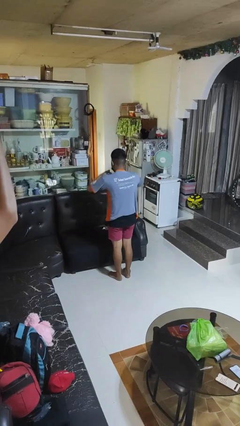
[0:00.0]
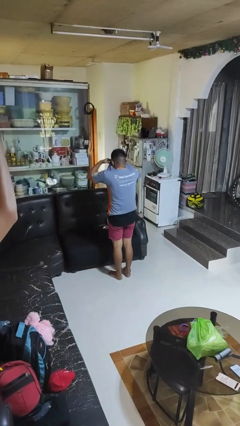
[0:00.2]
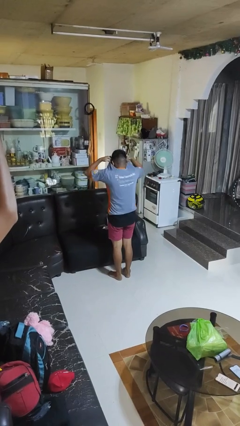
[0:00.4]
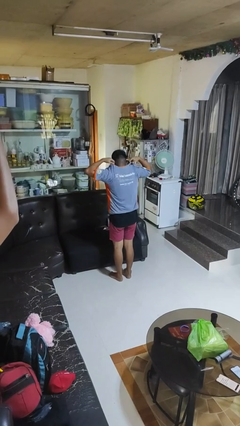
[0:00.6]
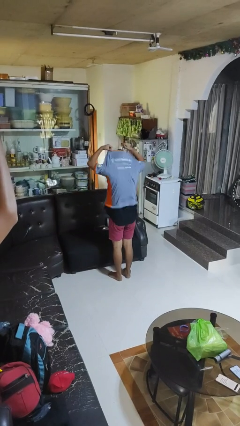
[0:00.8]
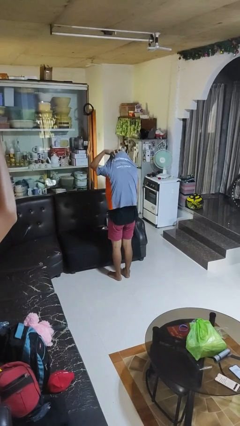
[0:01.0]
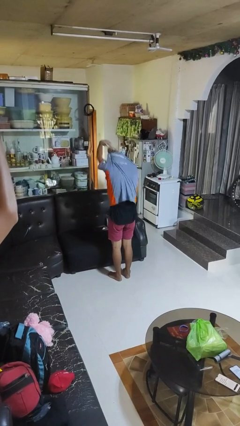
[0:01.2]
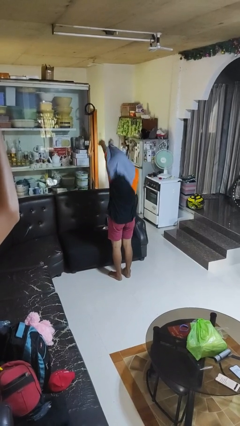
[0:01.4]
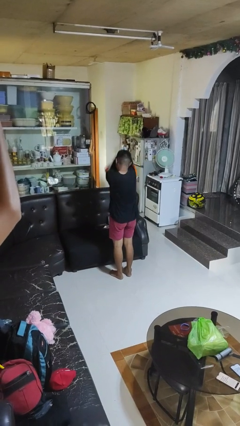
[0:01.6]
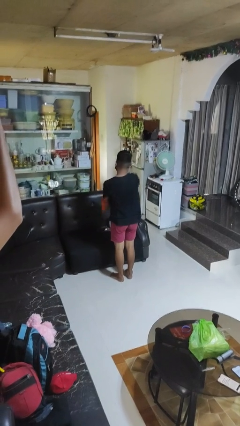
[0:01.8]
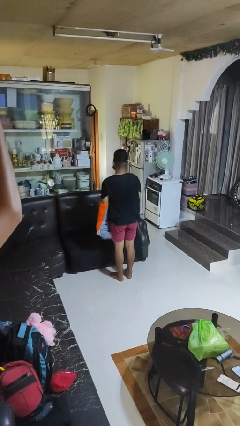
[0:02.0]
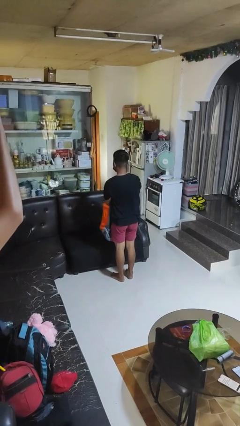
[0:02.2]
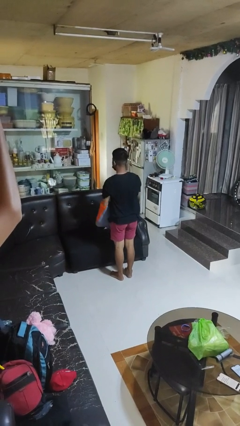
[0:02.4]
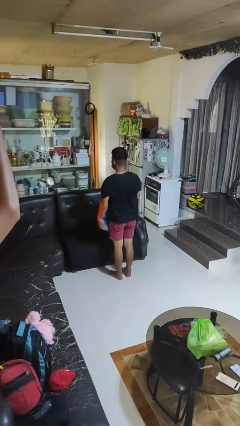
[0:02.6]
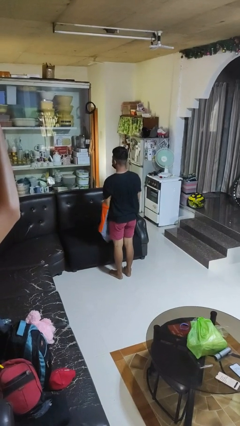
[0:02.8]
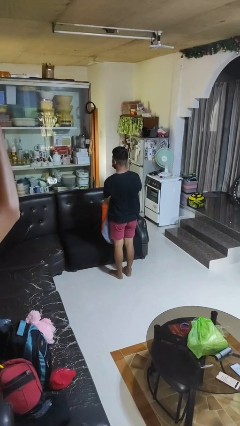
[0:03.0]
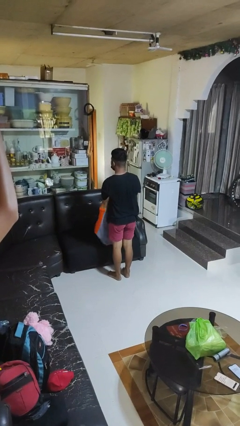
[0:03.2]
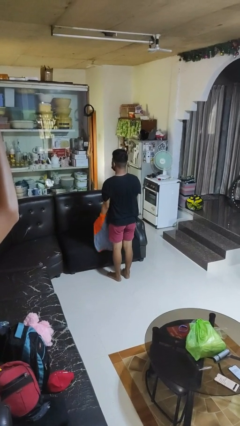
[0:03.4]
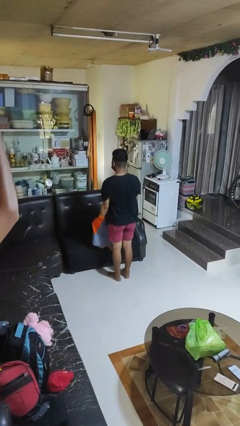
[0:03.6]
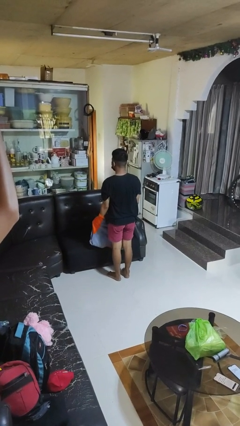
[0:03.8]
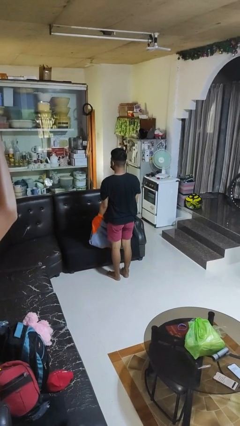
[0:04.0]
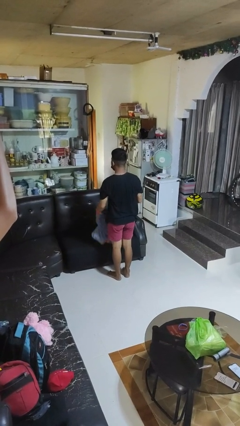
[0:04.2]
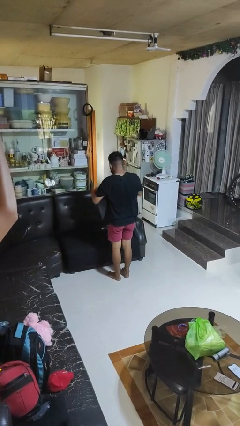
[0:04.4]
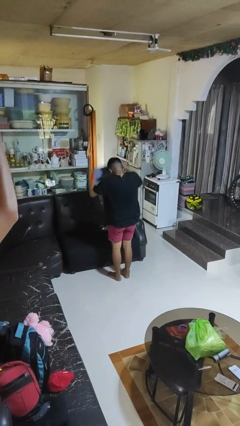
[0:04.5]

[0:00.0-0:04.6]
person takes off shirt

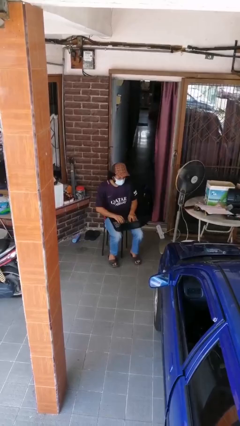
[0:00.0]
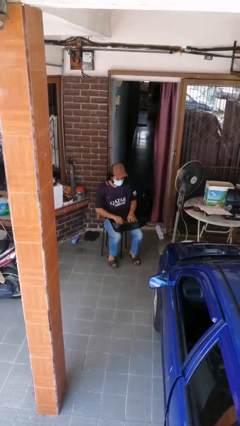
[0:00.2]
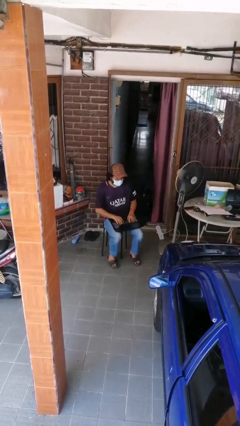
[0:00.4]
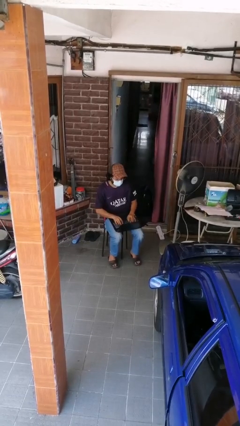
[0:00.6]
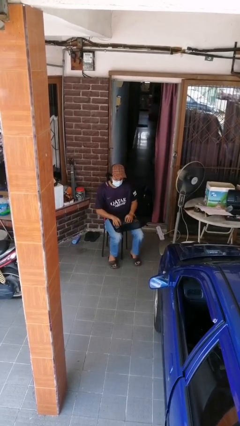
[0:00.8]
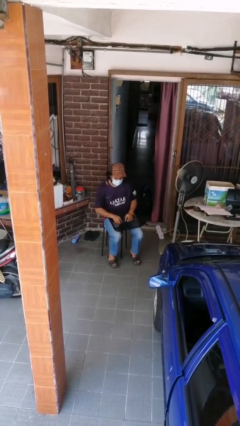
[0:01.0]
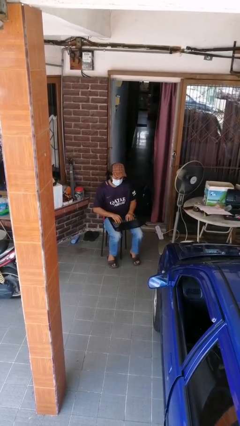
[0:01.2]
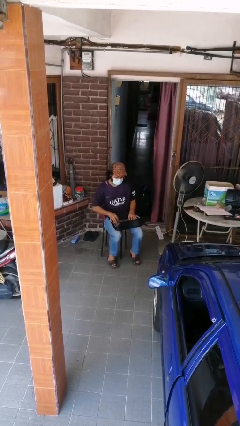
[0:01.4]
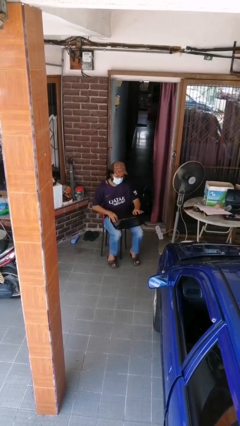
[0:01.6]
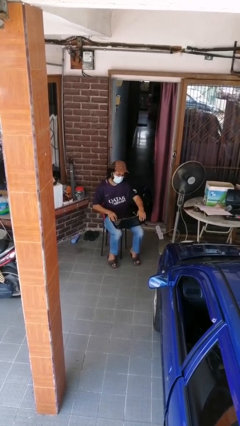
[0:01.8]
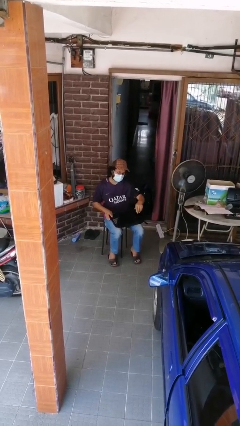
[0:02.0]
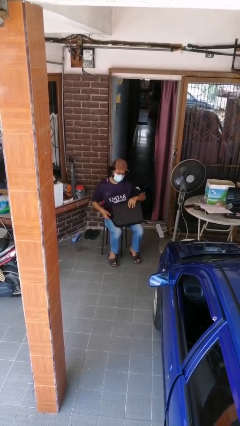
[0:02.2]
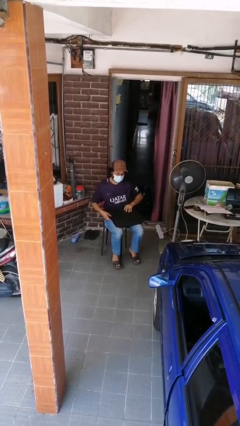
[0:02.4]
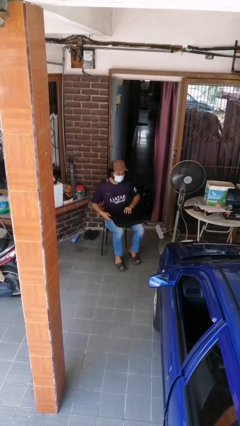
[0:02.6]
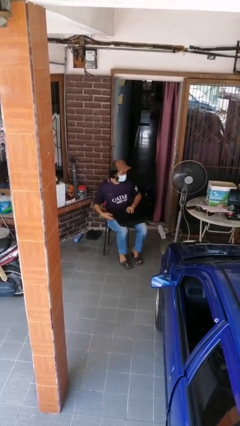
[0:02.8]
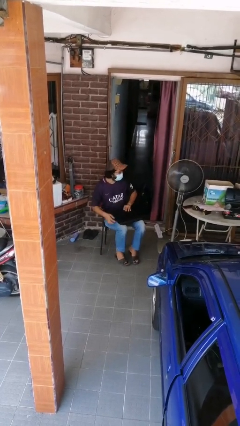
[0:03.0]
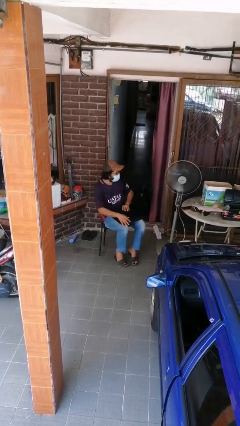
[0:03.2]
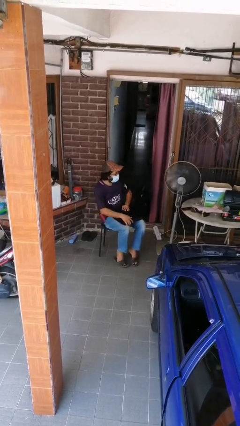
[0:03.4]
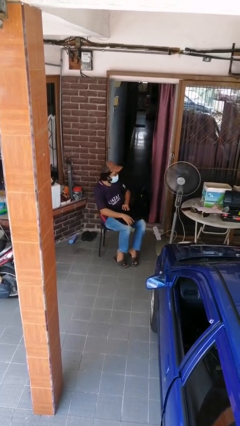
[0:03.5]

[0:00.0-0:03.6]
person interacts with laptop

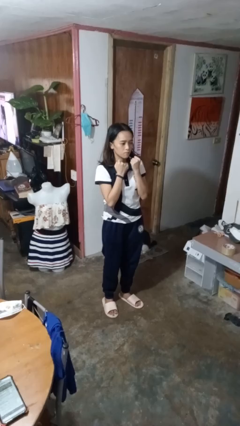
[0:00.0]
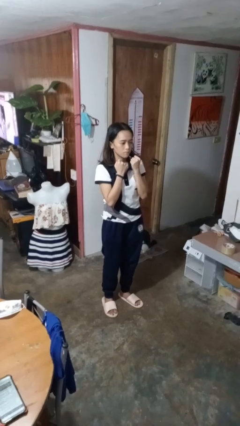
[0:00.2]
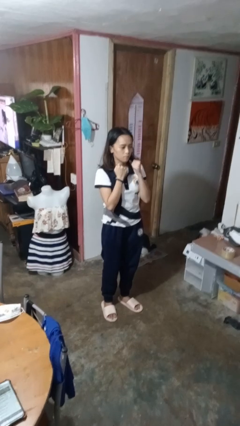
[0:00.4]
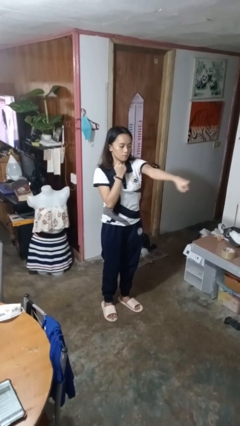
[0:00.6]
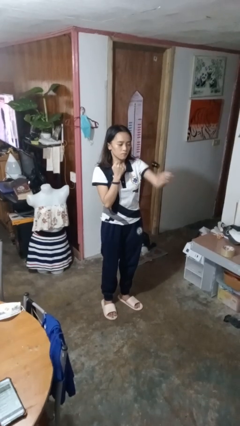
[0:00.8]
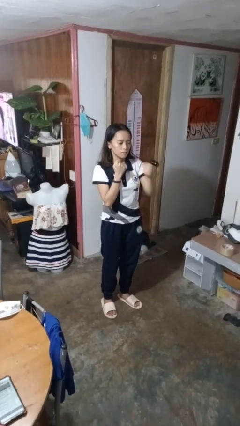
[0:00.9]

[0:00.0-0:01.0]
person punches

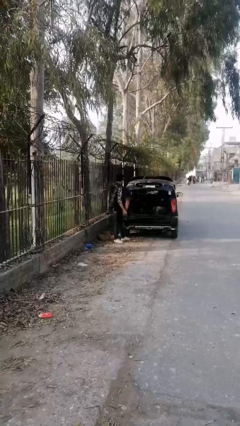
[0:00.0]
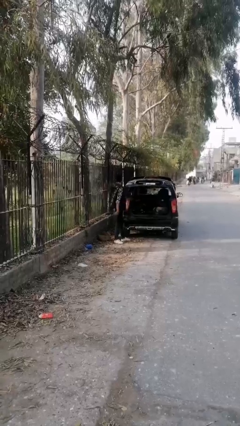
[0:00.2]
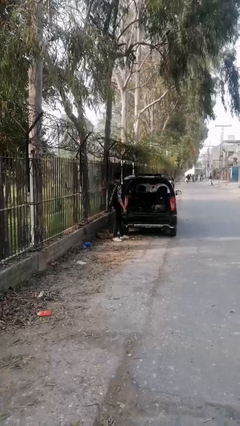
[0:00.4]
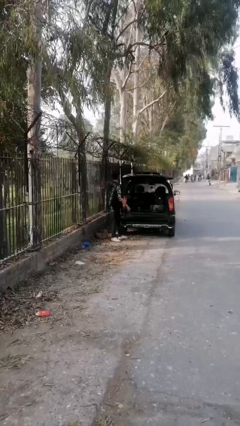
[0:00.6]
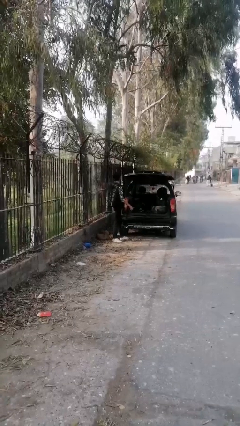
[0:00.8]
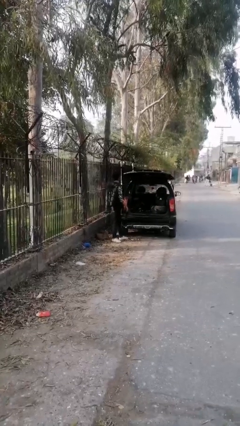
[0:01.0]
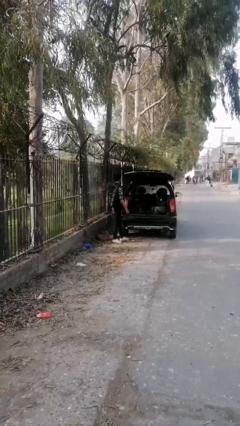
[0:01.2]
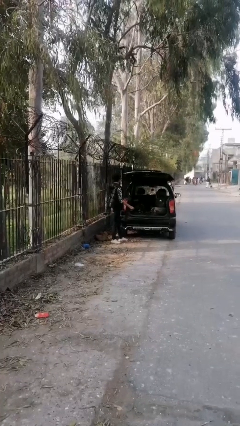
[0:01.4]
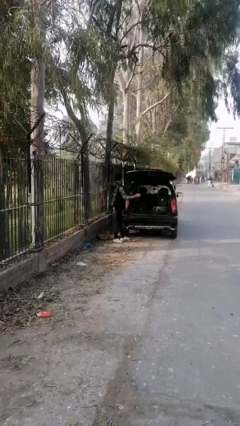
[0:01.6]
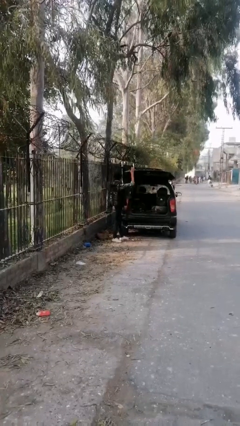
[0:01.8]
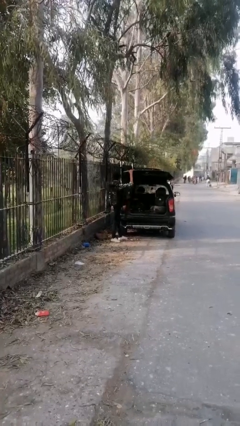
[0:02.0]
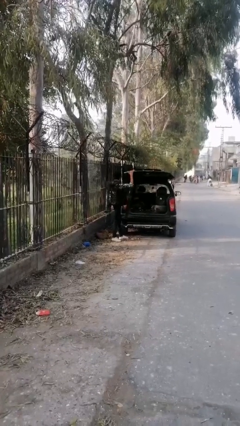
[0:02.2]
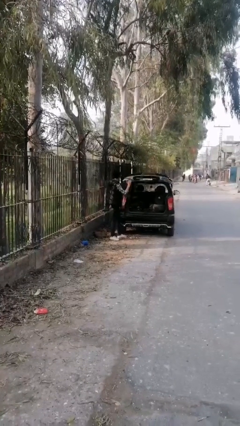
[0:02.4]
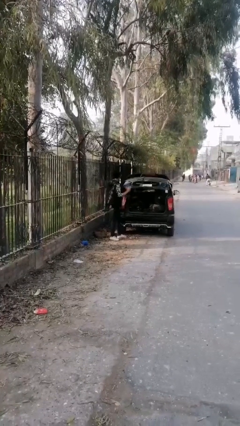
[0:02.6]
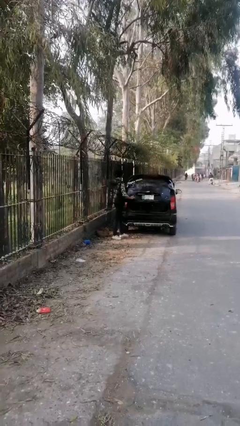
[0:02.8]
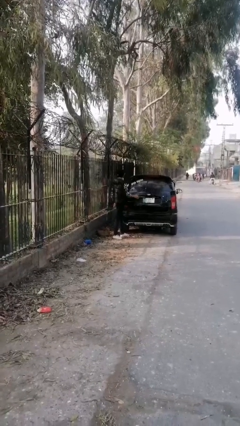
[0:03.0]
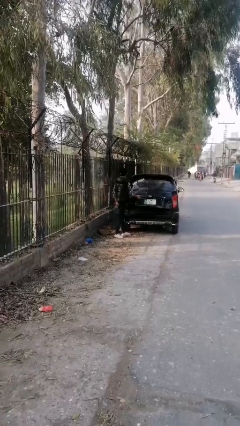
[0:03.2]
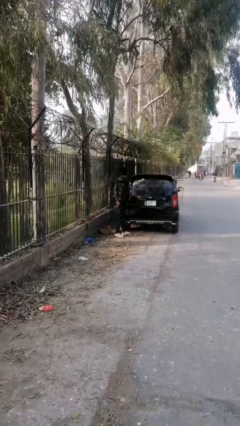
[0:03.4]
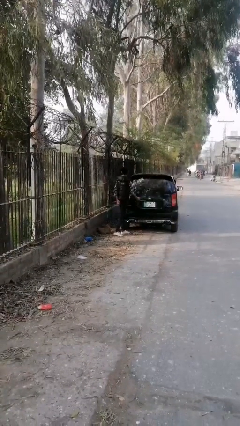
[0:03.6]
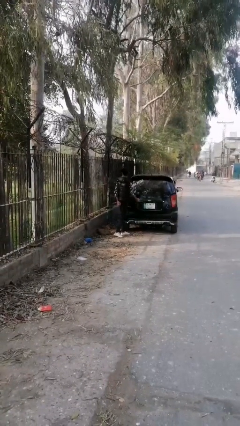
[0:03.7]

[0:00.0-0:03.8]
person opens car trunk

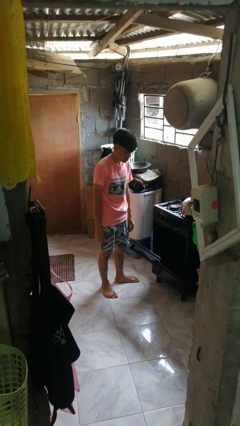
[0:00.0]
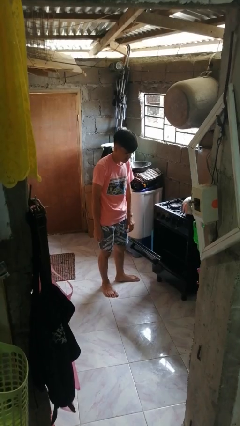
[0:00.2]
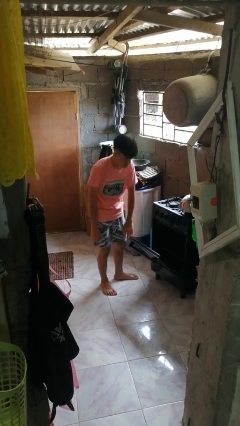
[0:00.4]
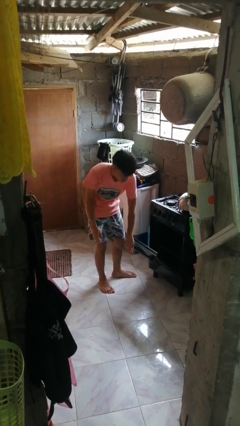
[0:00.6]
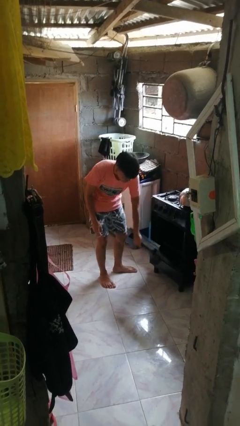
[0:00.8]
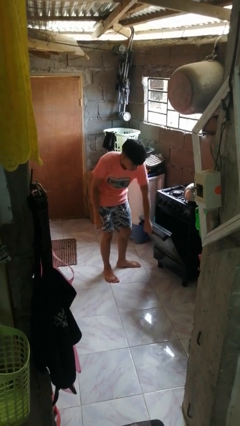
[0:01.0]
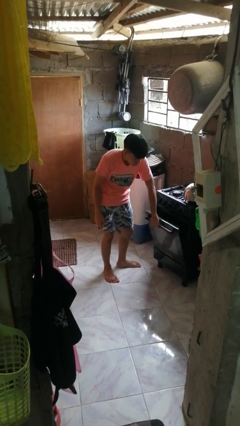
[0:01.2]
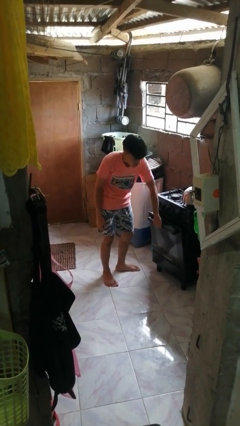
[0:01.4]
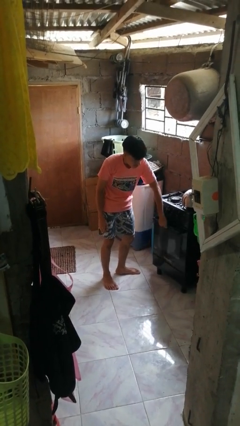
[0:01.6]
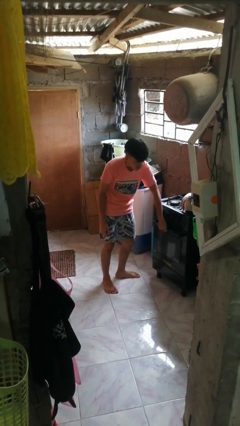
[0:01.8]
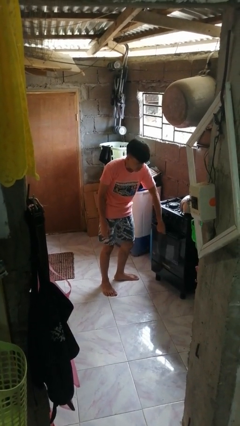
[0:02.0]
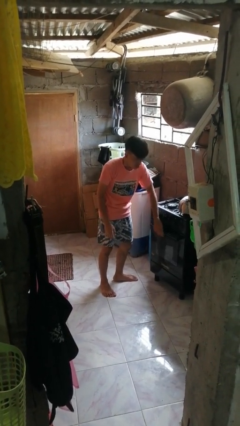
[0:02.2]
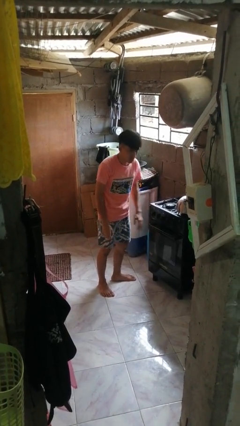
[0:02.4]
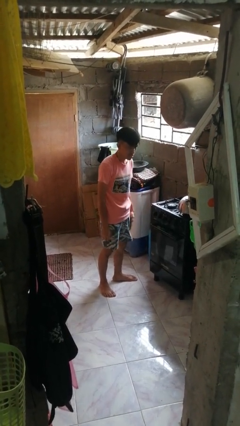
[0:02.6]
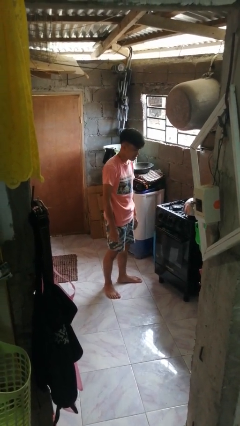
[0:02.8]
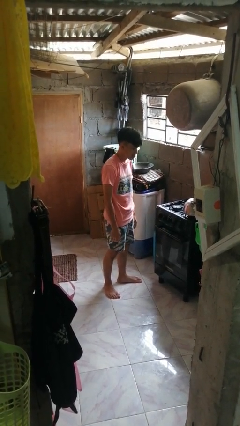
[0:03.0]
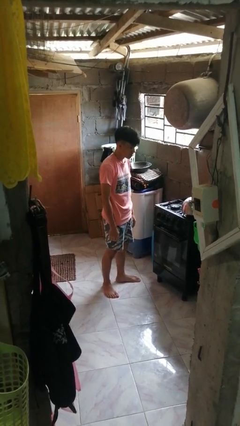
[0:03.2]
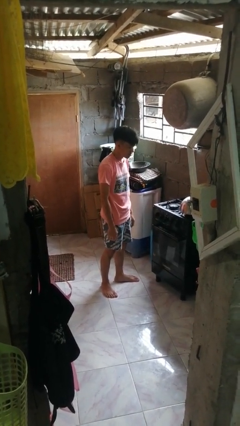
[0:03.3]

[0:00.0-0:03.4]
person closes oven door

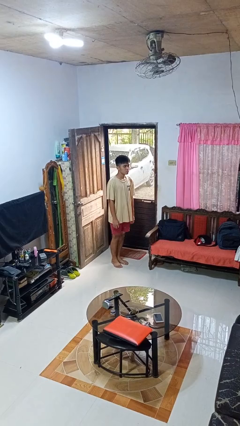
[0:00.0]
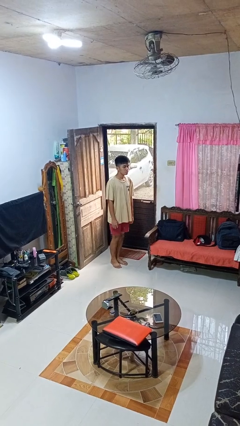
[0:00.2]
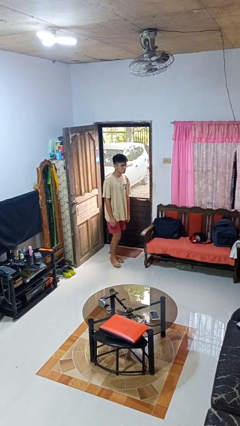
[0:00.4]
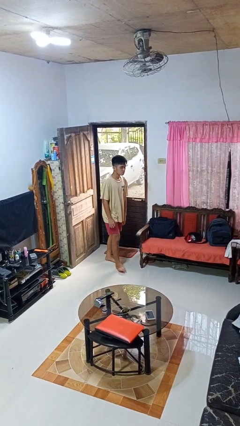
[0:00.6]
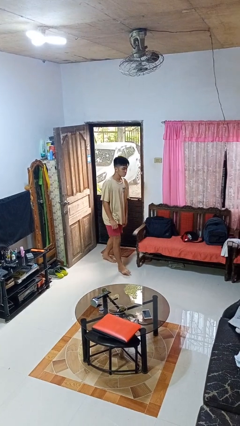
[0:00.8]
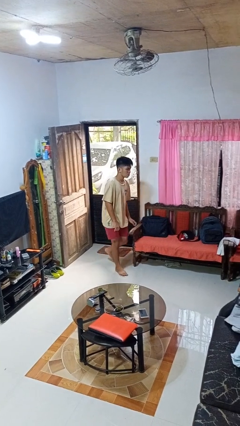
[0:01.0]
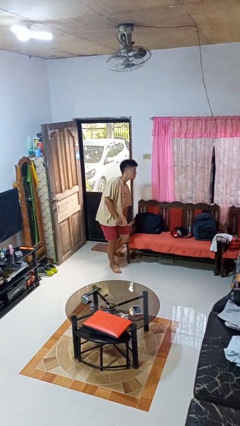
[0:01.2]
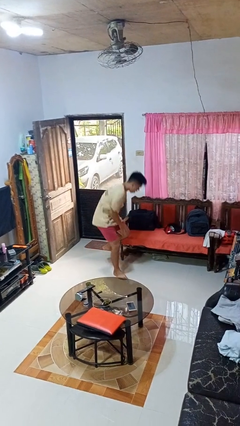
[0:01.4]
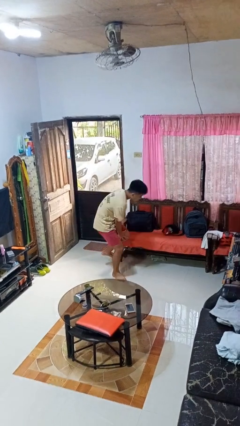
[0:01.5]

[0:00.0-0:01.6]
person trips on object on floor
